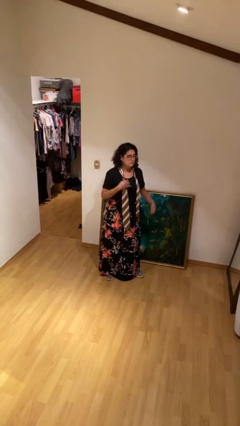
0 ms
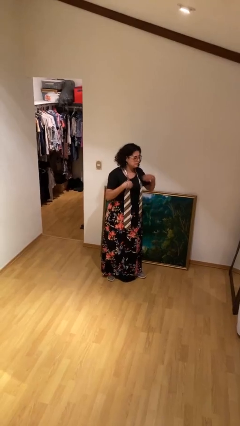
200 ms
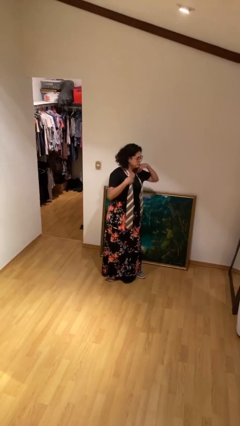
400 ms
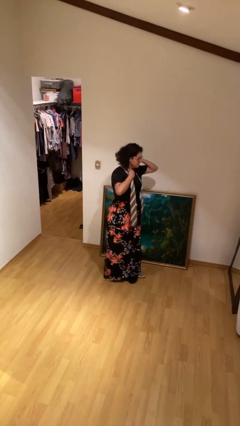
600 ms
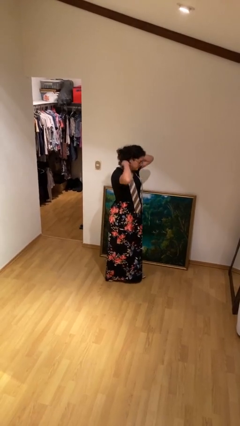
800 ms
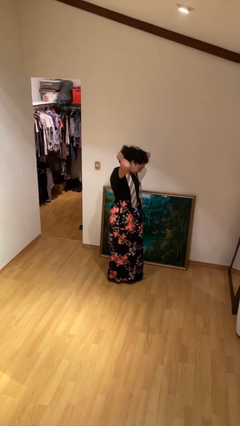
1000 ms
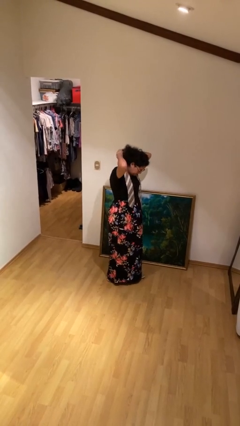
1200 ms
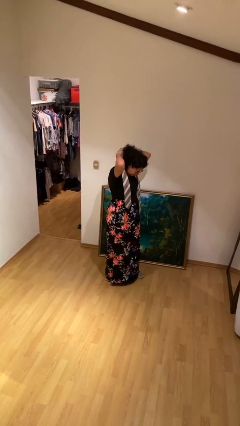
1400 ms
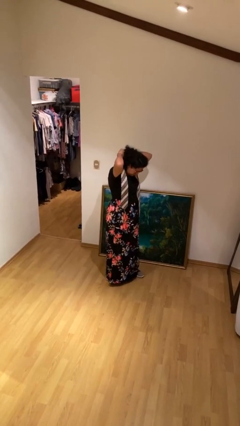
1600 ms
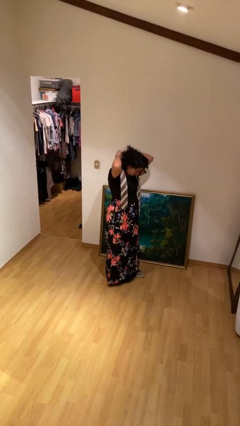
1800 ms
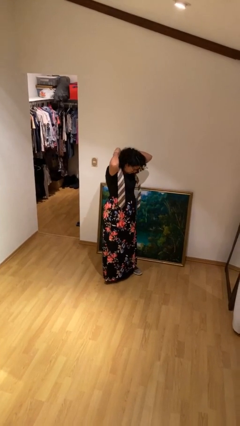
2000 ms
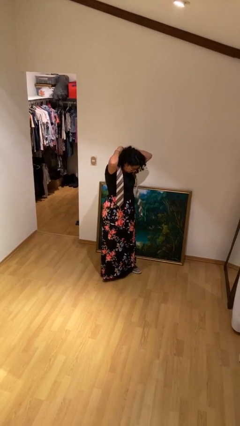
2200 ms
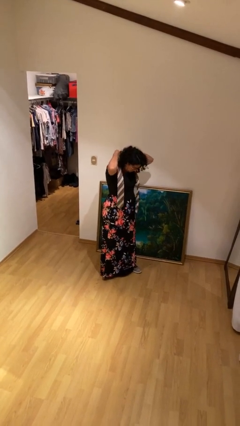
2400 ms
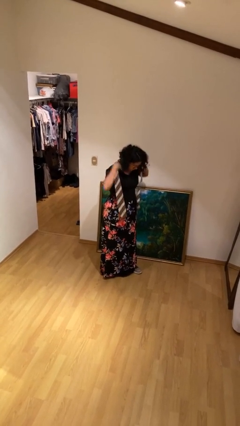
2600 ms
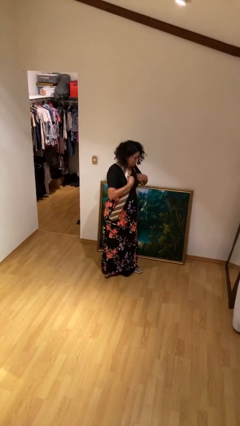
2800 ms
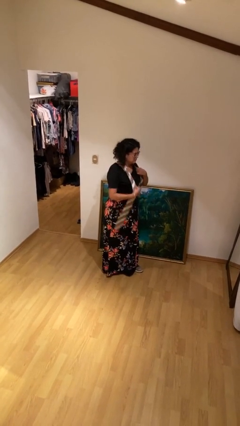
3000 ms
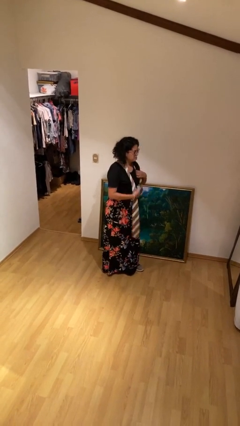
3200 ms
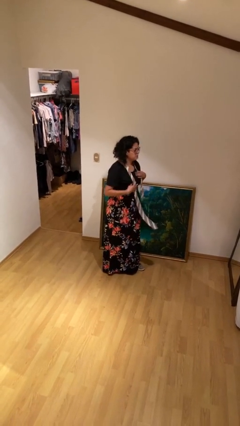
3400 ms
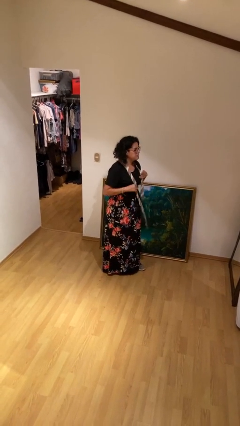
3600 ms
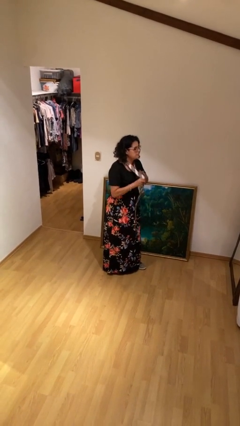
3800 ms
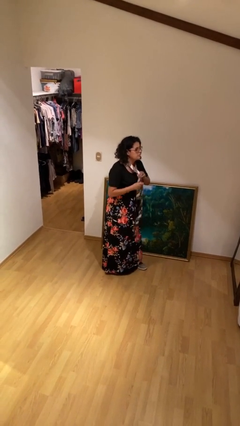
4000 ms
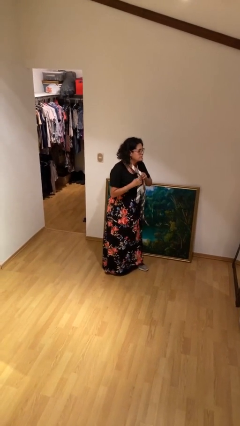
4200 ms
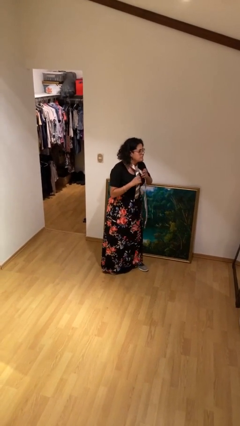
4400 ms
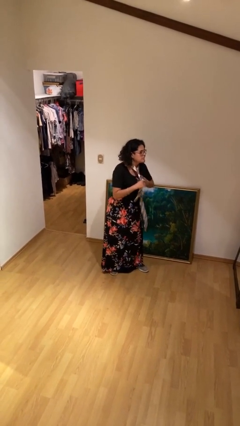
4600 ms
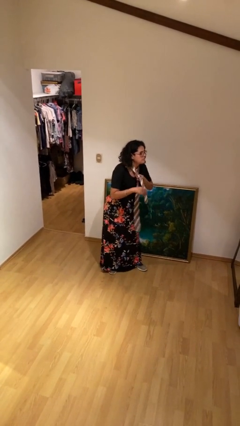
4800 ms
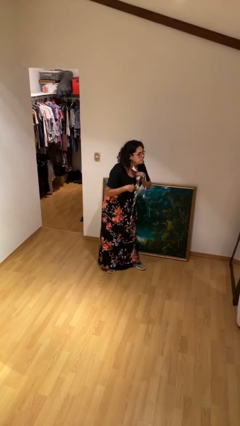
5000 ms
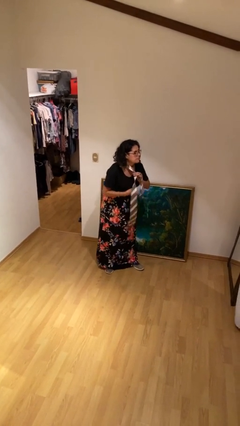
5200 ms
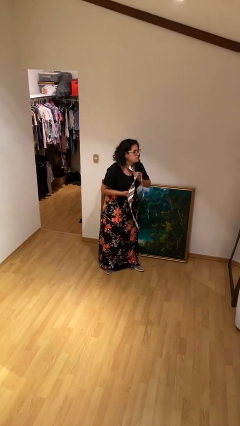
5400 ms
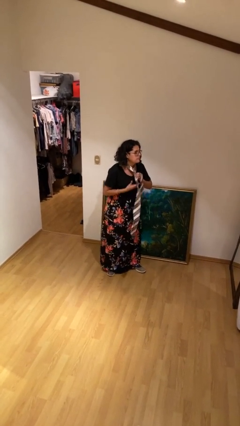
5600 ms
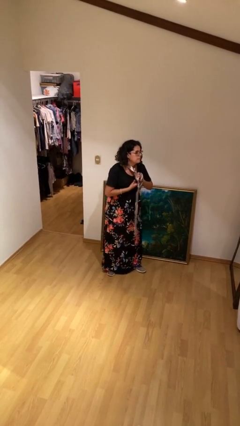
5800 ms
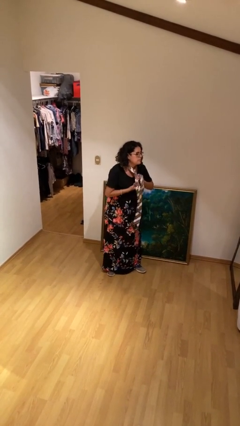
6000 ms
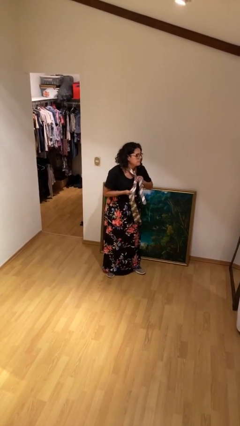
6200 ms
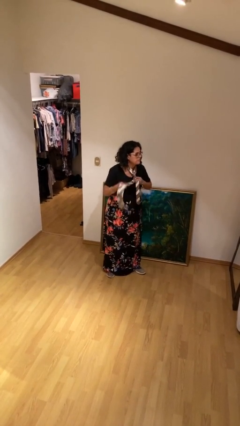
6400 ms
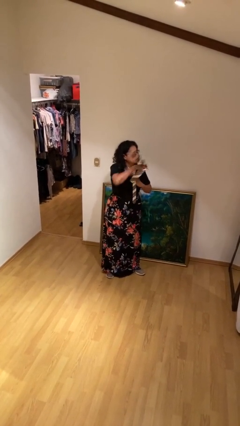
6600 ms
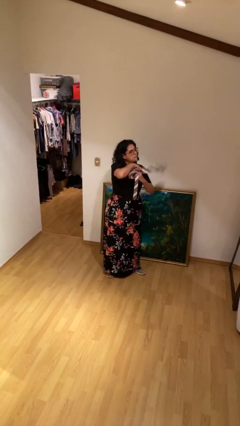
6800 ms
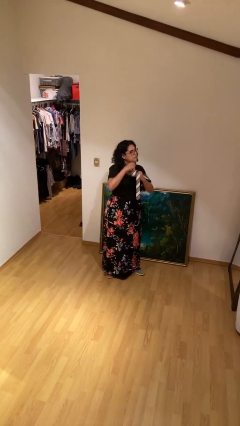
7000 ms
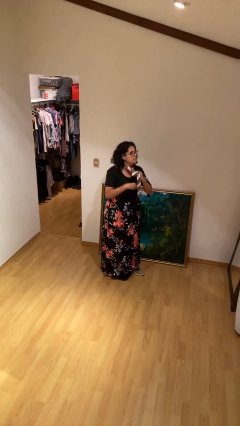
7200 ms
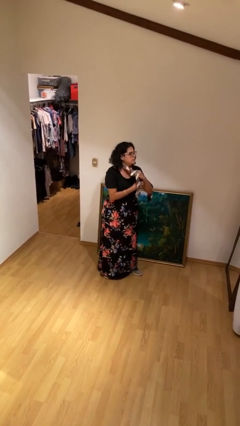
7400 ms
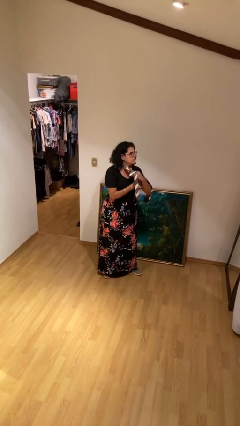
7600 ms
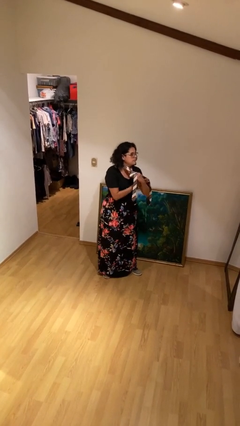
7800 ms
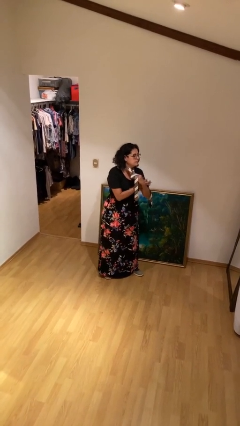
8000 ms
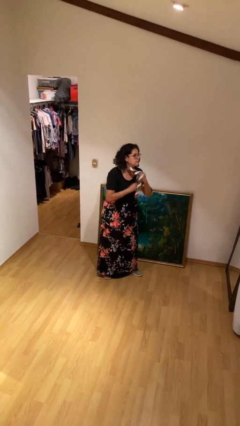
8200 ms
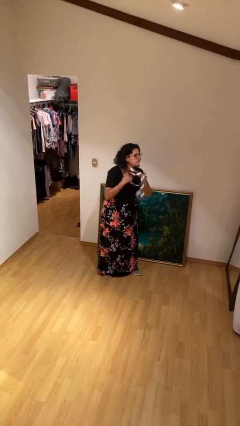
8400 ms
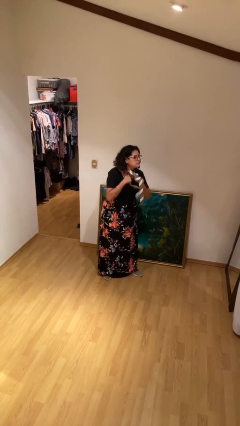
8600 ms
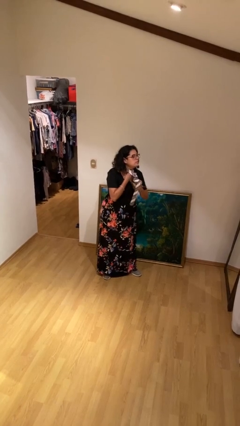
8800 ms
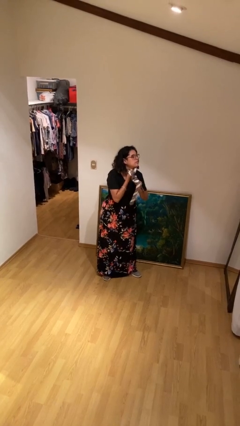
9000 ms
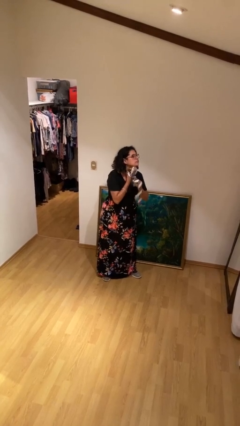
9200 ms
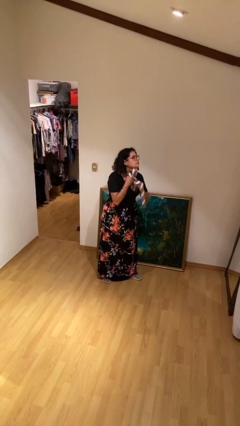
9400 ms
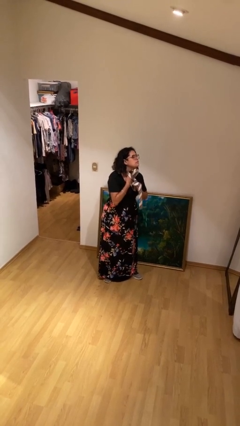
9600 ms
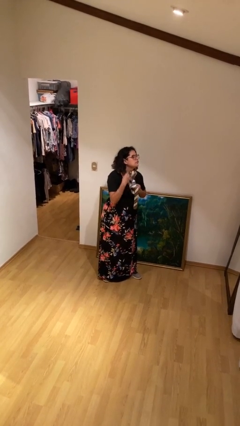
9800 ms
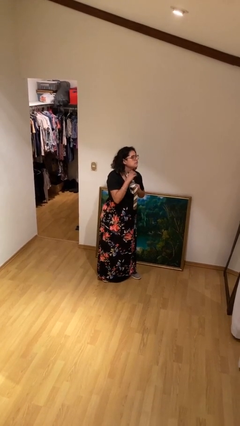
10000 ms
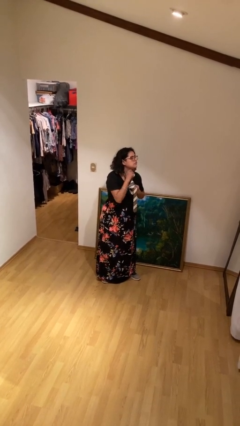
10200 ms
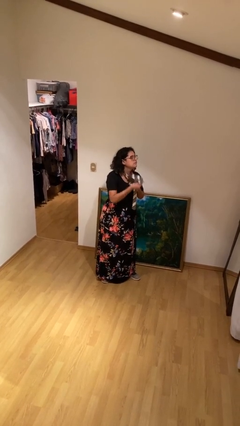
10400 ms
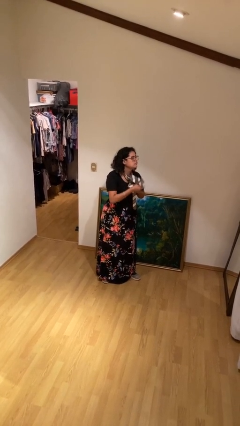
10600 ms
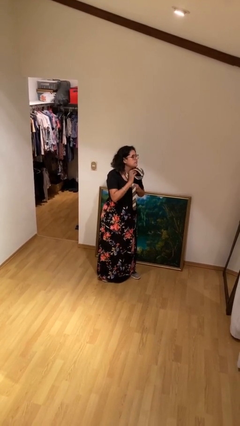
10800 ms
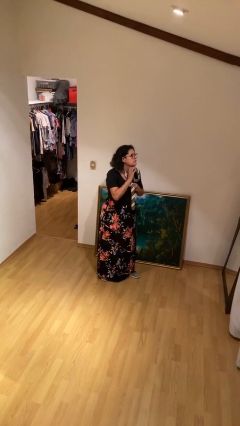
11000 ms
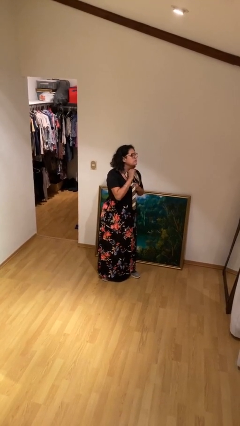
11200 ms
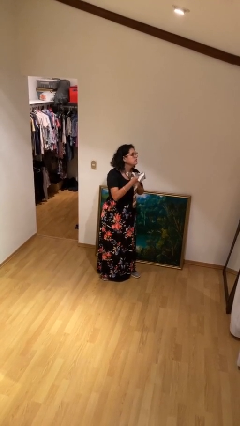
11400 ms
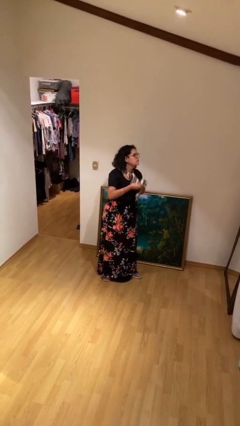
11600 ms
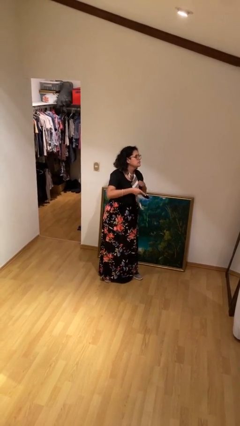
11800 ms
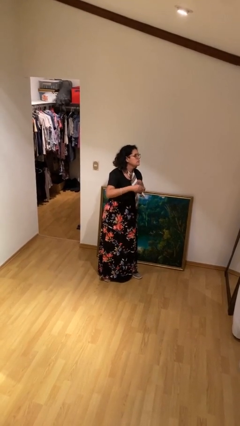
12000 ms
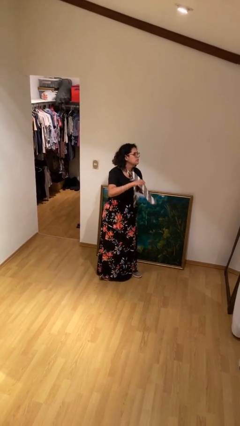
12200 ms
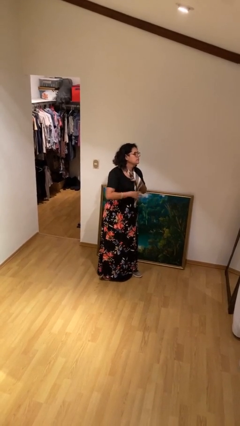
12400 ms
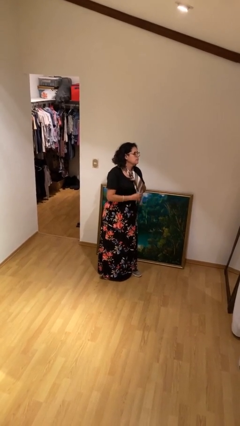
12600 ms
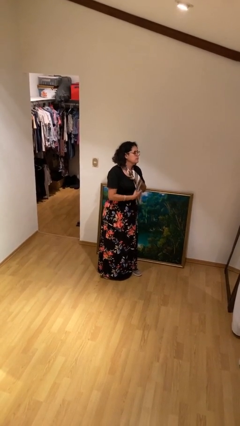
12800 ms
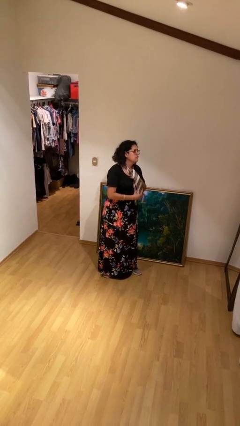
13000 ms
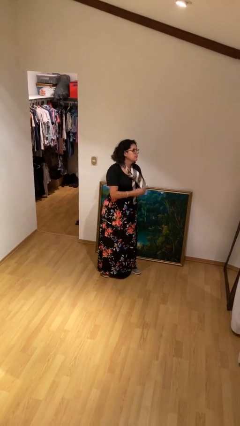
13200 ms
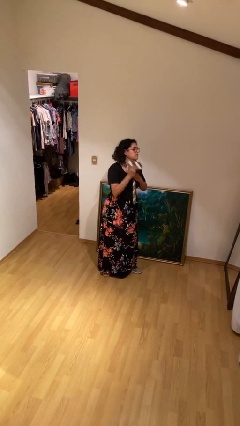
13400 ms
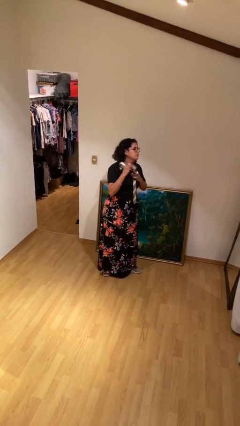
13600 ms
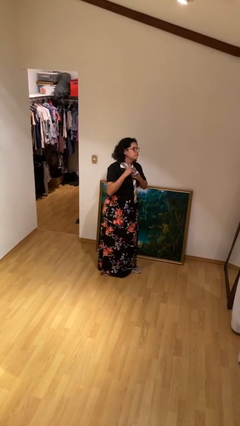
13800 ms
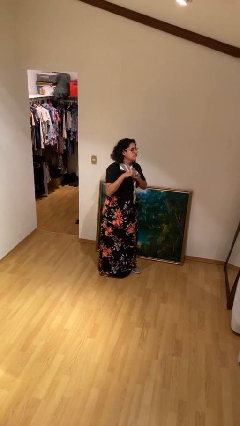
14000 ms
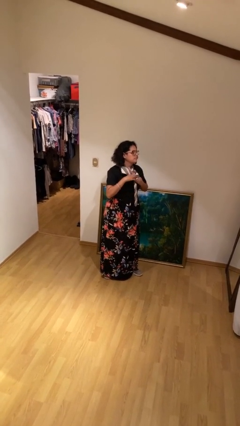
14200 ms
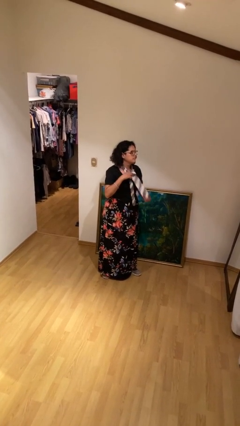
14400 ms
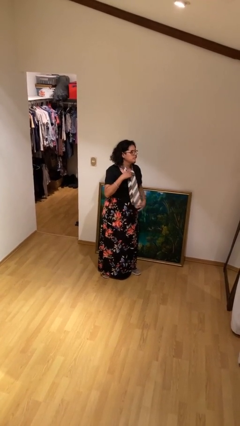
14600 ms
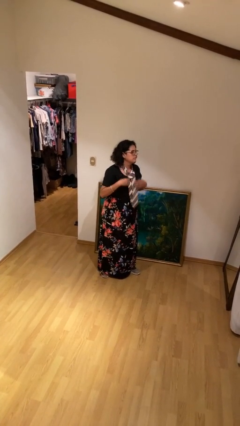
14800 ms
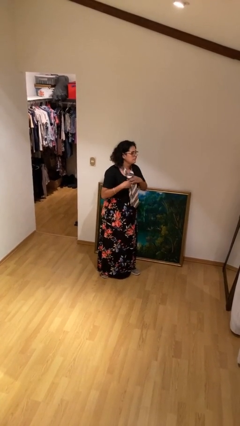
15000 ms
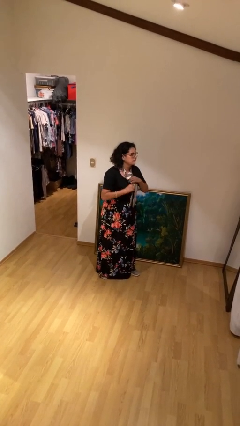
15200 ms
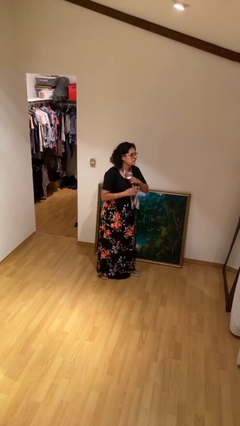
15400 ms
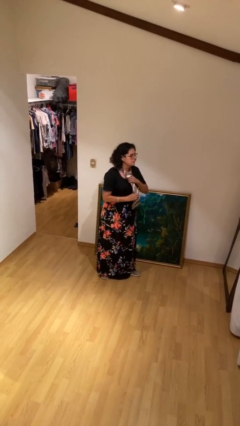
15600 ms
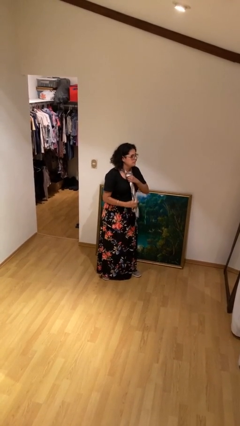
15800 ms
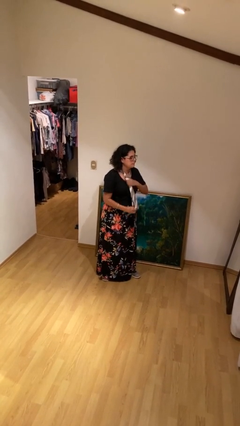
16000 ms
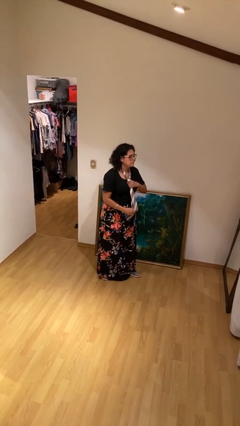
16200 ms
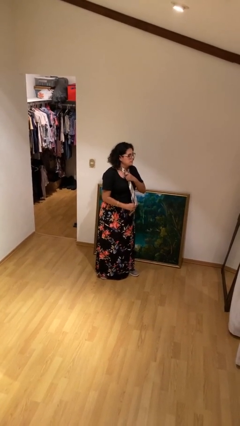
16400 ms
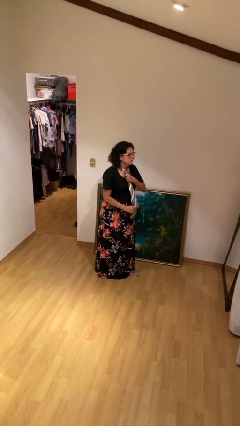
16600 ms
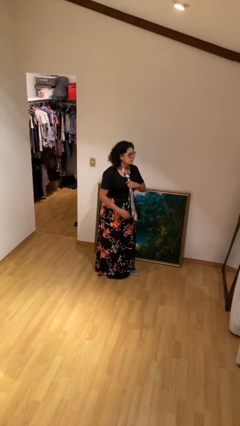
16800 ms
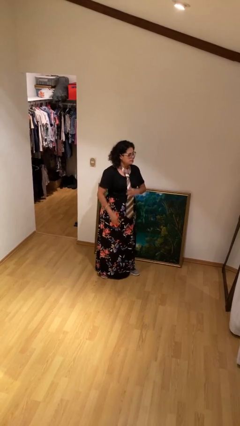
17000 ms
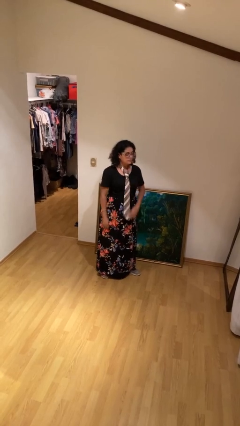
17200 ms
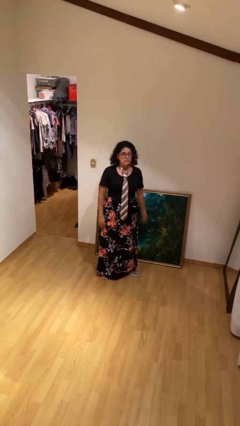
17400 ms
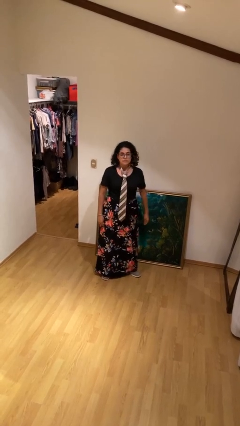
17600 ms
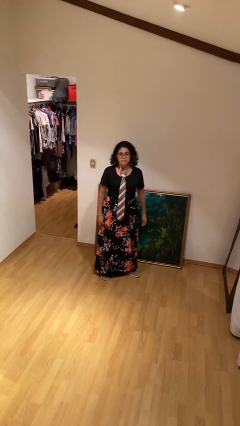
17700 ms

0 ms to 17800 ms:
person puts on necktie

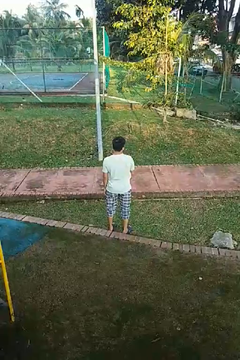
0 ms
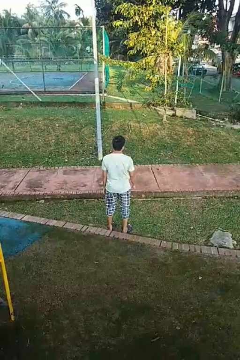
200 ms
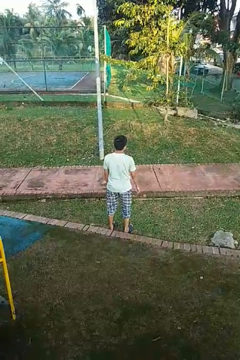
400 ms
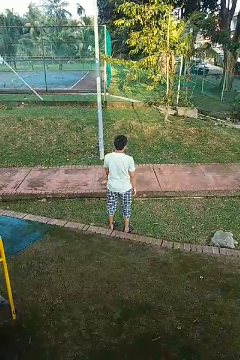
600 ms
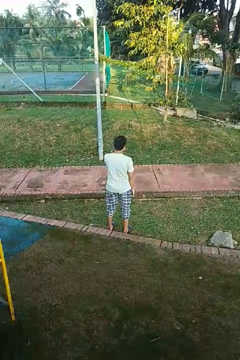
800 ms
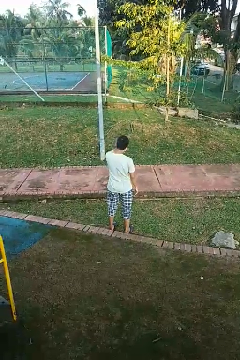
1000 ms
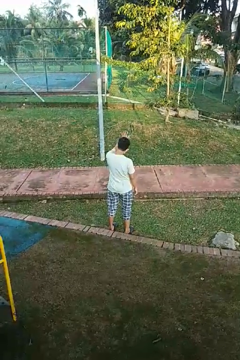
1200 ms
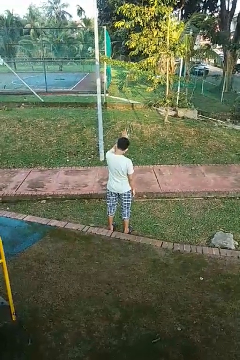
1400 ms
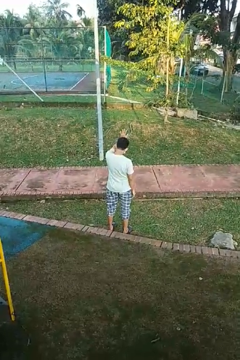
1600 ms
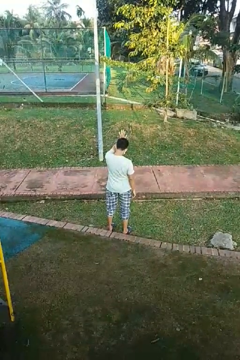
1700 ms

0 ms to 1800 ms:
person gestures stop
